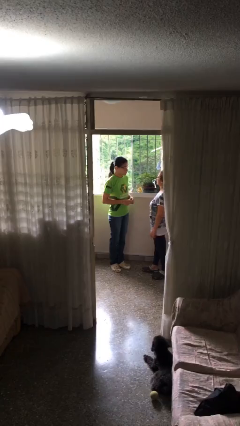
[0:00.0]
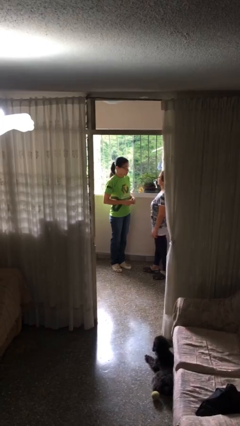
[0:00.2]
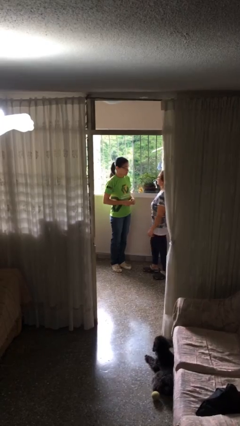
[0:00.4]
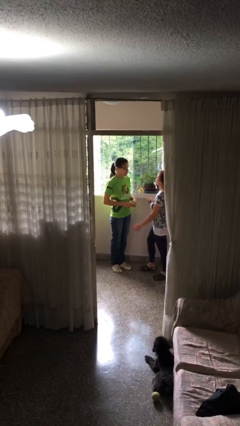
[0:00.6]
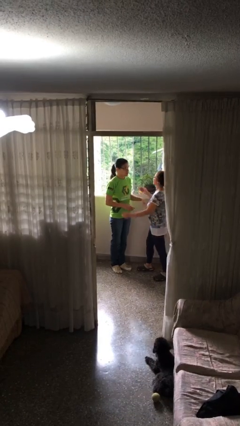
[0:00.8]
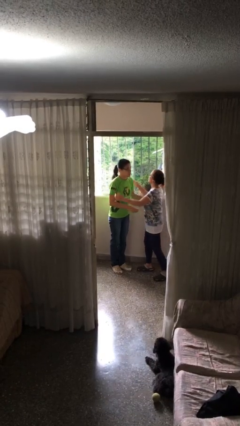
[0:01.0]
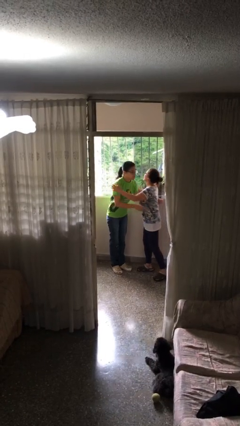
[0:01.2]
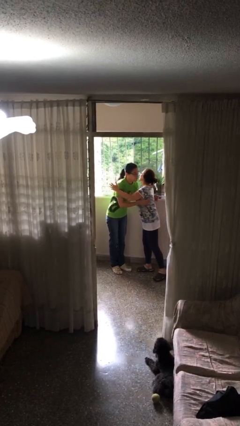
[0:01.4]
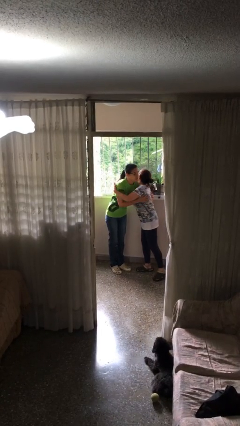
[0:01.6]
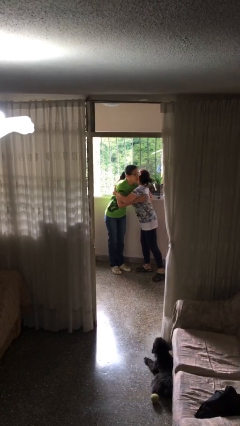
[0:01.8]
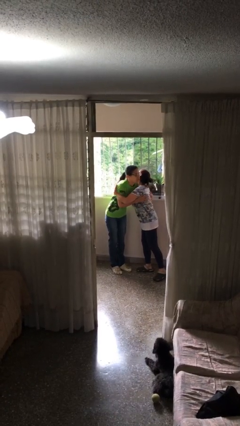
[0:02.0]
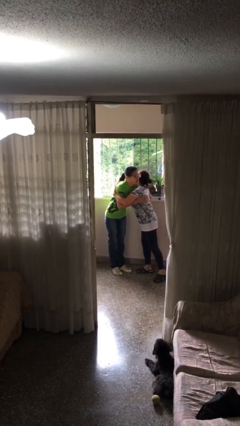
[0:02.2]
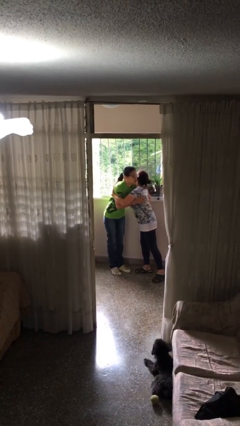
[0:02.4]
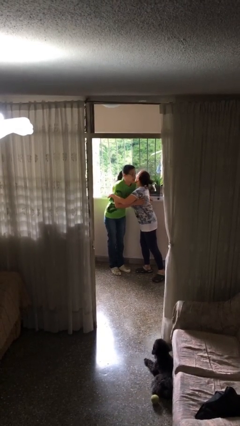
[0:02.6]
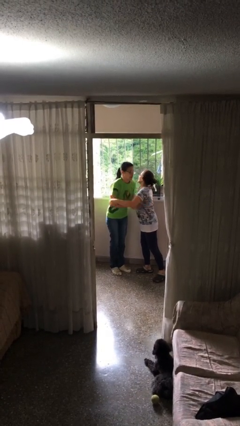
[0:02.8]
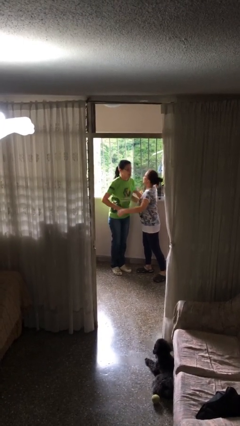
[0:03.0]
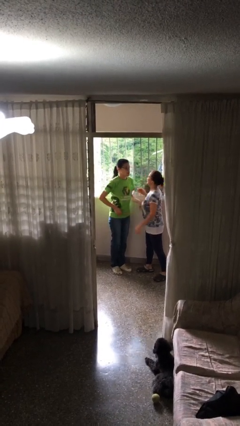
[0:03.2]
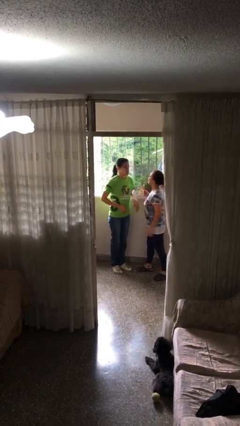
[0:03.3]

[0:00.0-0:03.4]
person embraces person

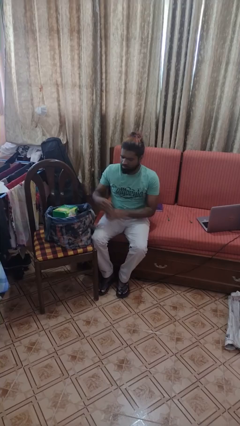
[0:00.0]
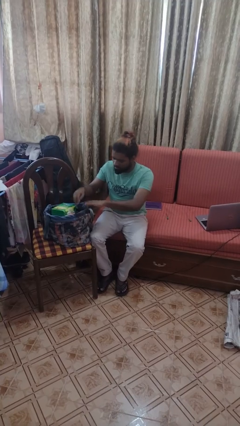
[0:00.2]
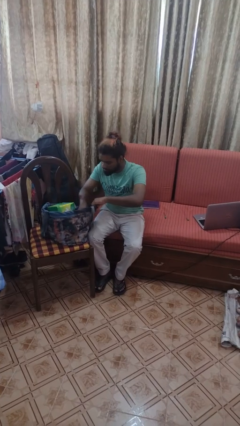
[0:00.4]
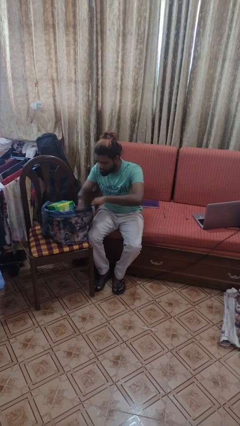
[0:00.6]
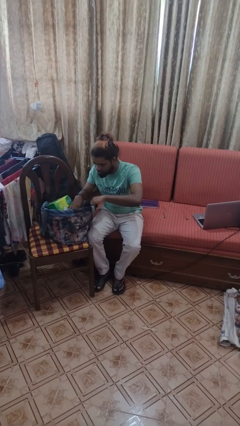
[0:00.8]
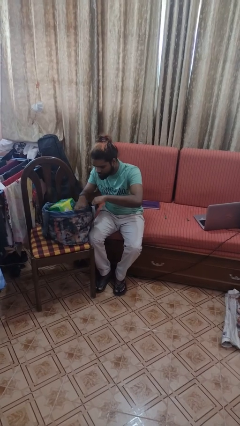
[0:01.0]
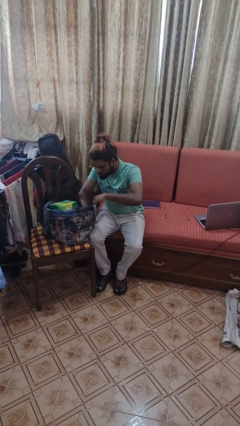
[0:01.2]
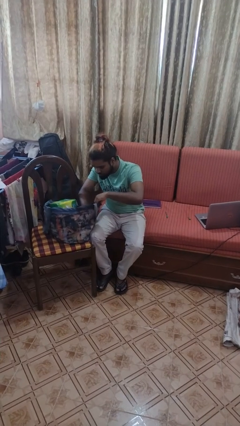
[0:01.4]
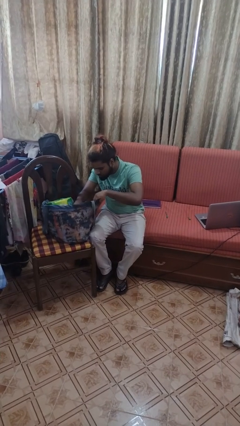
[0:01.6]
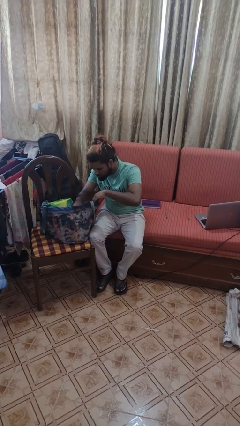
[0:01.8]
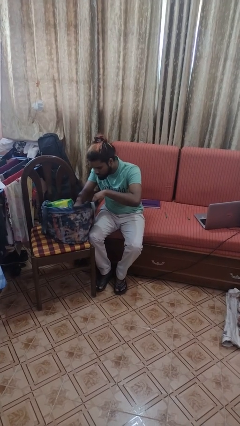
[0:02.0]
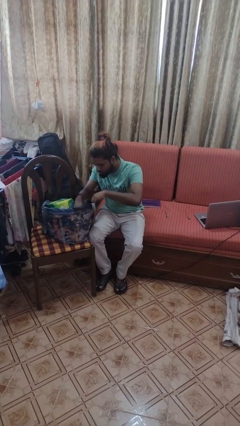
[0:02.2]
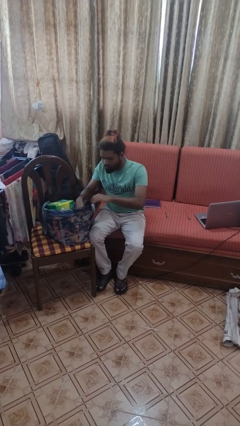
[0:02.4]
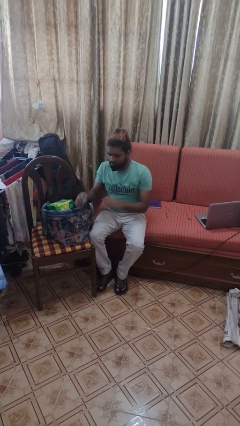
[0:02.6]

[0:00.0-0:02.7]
person searches in bag

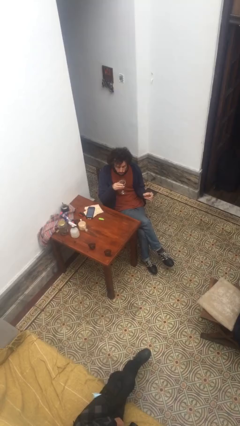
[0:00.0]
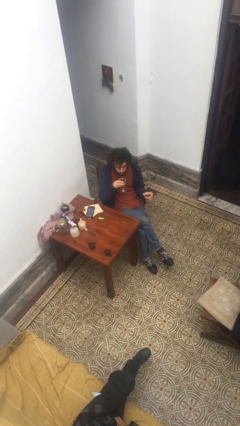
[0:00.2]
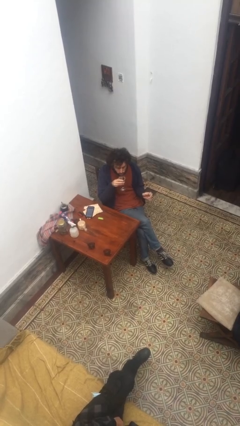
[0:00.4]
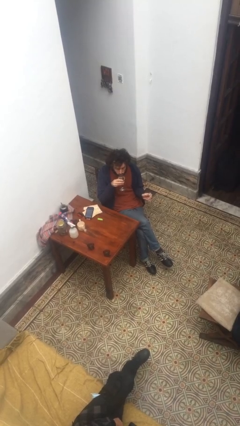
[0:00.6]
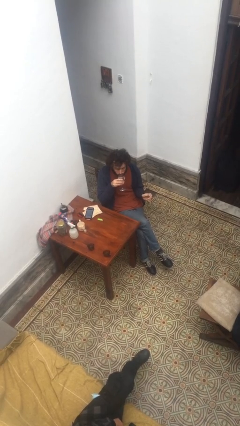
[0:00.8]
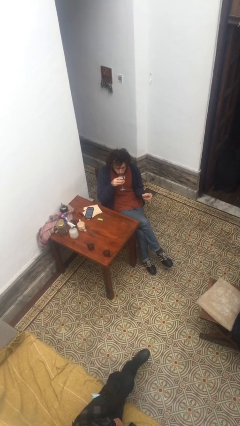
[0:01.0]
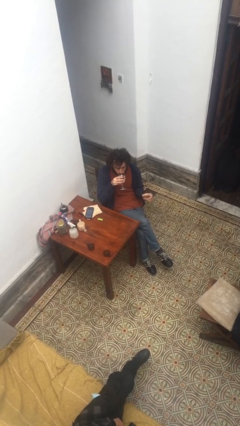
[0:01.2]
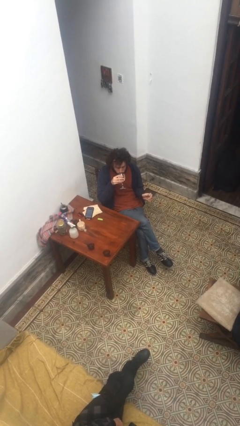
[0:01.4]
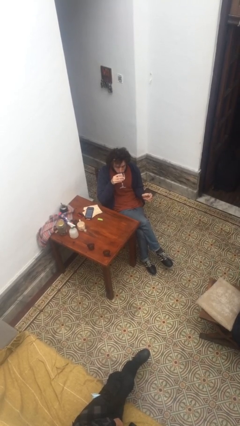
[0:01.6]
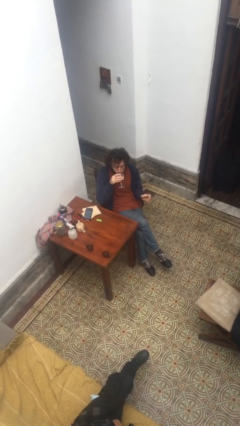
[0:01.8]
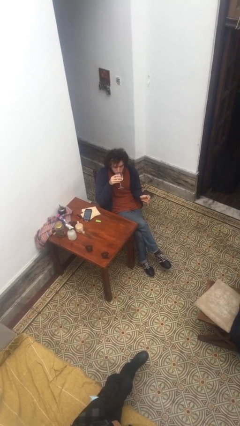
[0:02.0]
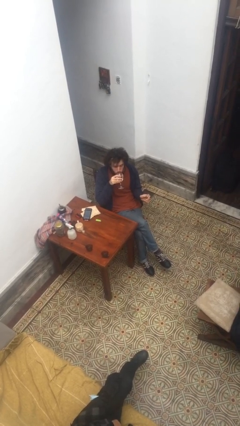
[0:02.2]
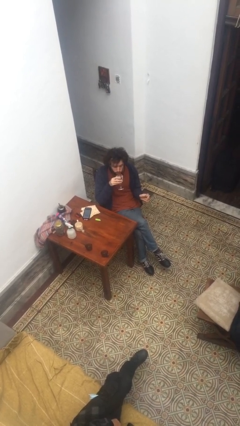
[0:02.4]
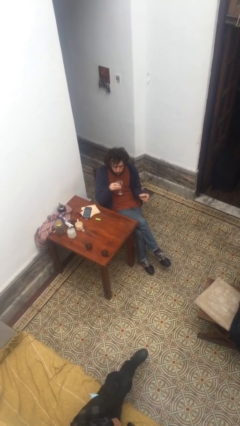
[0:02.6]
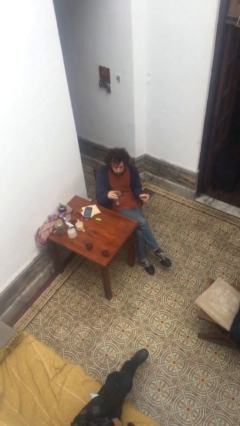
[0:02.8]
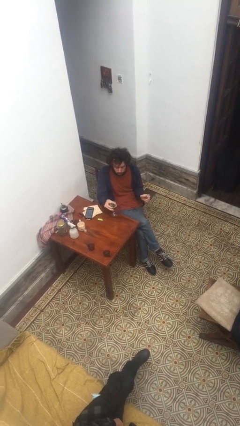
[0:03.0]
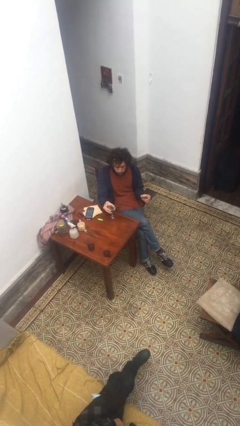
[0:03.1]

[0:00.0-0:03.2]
person drinks from cup

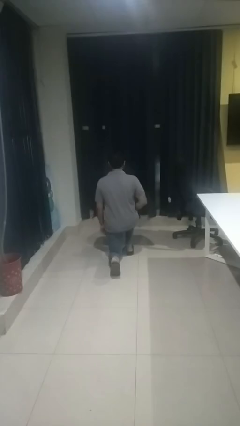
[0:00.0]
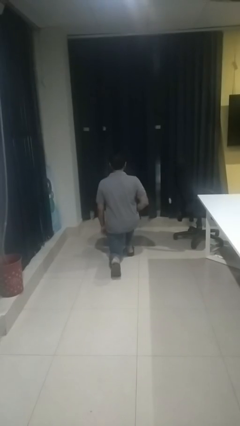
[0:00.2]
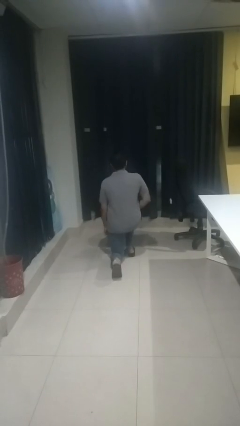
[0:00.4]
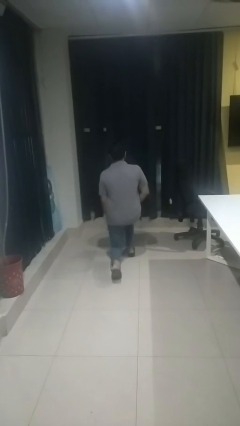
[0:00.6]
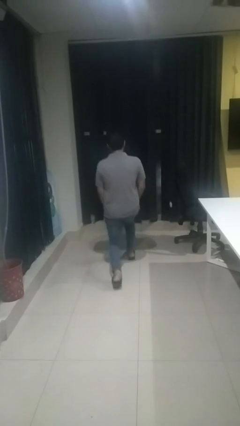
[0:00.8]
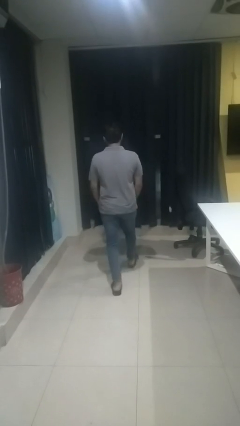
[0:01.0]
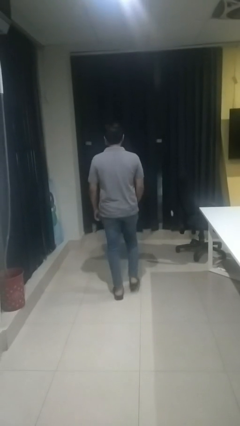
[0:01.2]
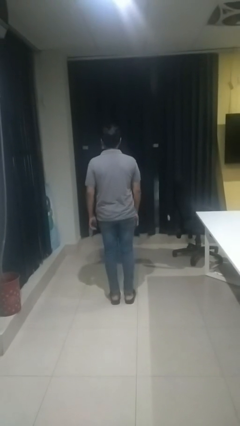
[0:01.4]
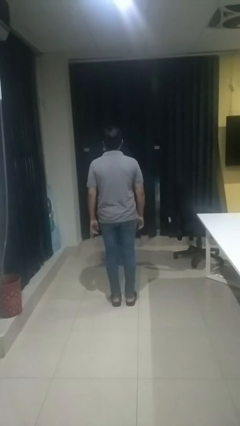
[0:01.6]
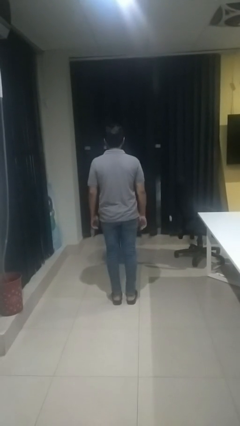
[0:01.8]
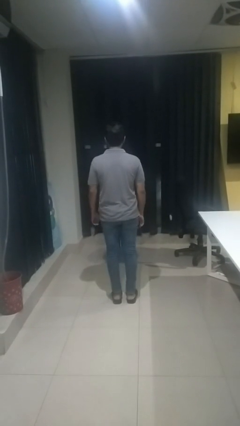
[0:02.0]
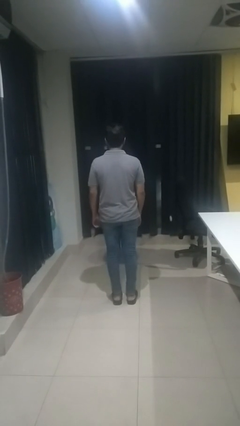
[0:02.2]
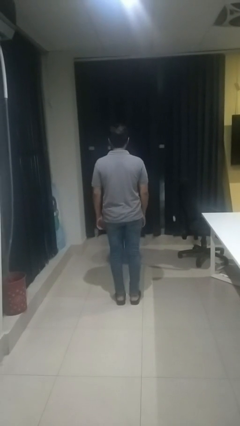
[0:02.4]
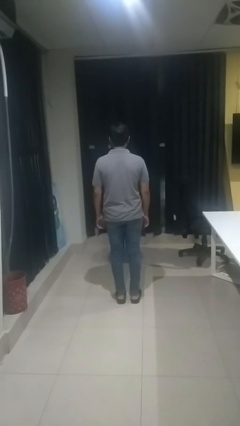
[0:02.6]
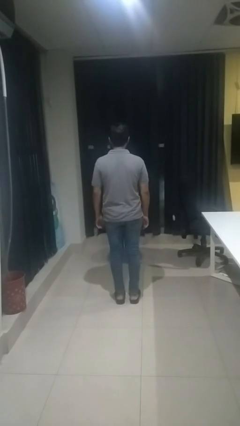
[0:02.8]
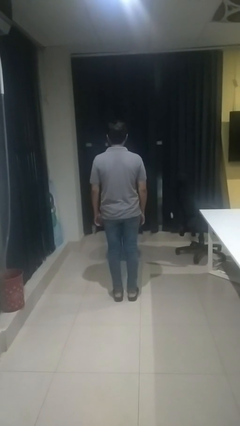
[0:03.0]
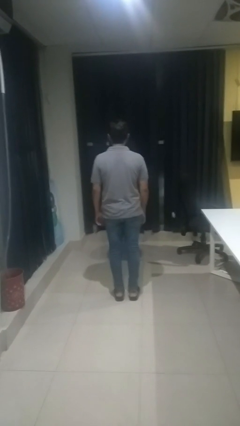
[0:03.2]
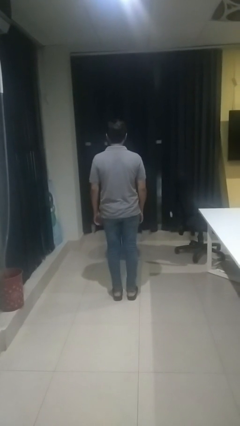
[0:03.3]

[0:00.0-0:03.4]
person stands up from floor

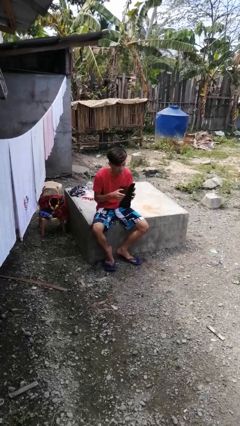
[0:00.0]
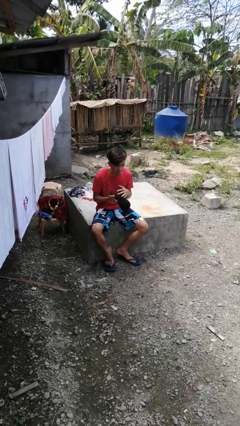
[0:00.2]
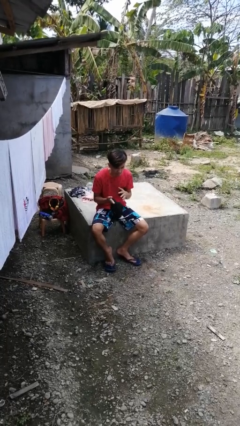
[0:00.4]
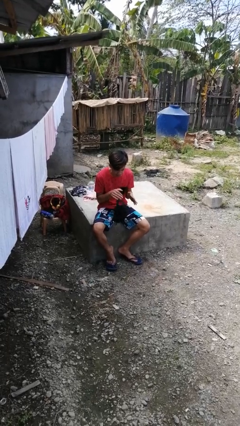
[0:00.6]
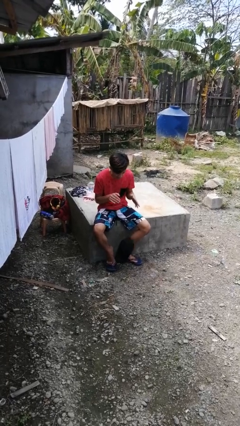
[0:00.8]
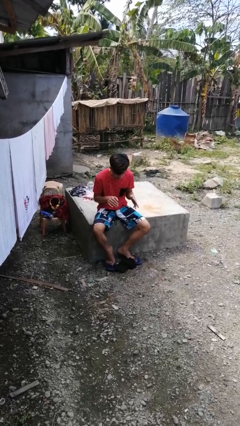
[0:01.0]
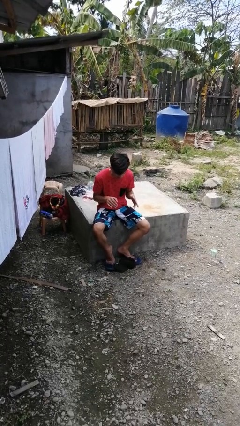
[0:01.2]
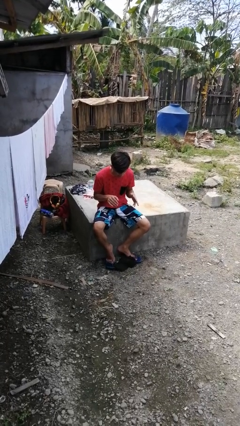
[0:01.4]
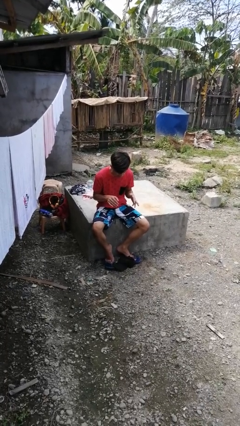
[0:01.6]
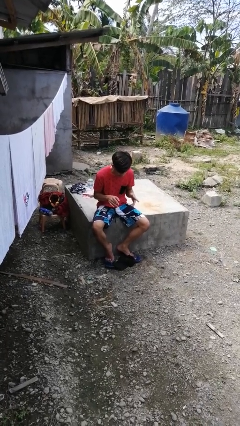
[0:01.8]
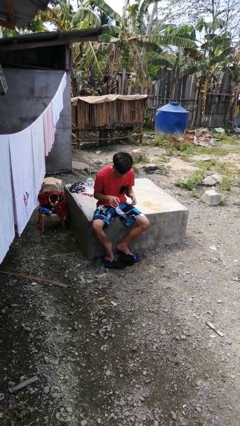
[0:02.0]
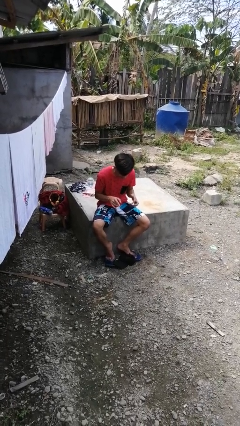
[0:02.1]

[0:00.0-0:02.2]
person drops object

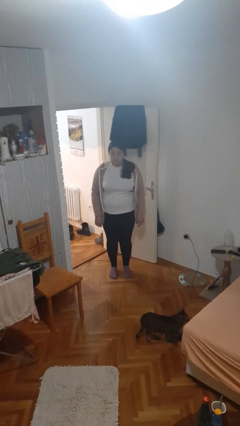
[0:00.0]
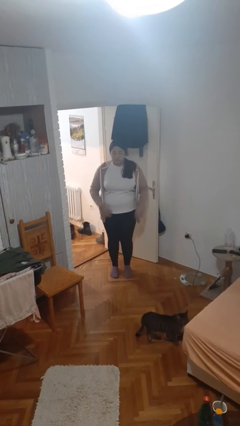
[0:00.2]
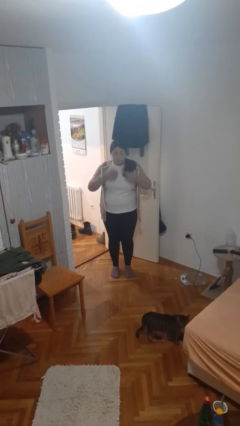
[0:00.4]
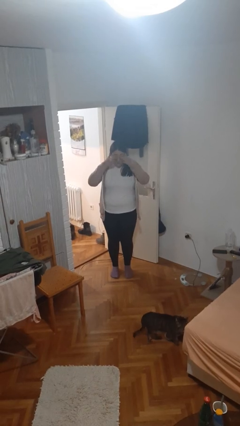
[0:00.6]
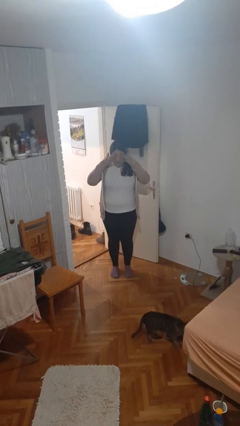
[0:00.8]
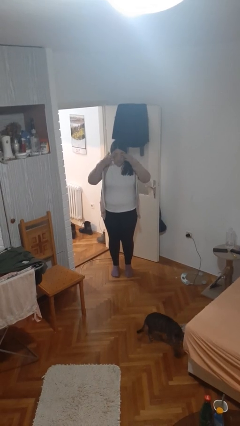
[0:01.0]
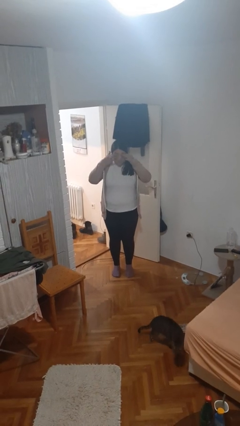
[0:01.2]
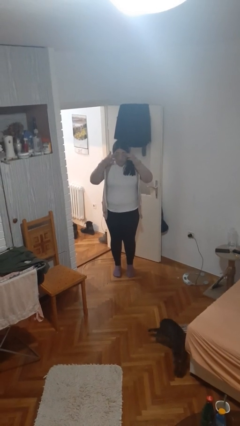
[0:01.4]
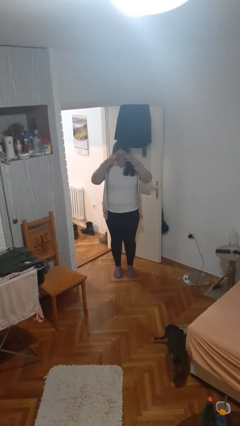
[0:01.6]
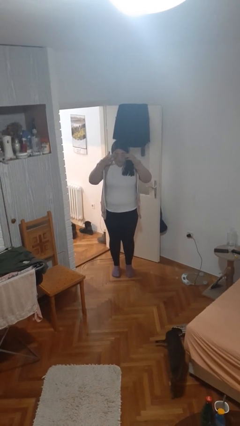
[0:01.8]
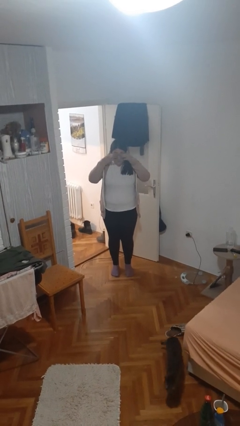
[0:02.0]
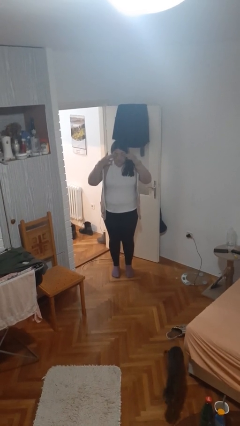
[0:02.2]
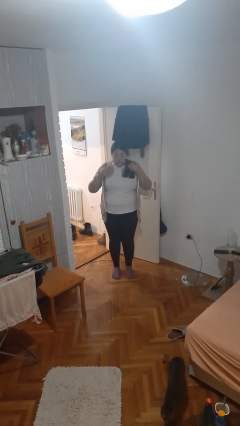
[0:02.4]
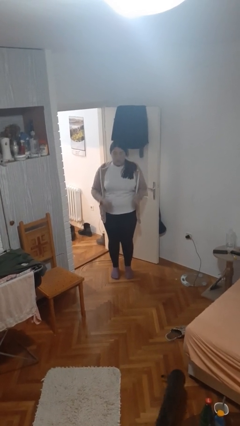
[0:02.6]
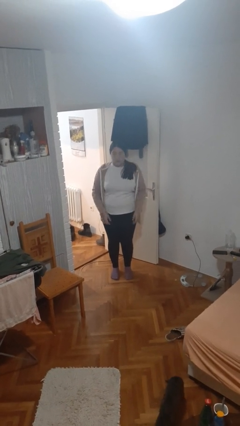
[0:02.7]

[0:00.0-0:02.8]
person rubs eyes
